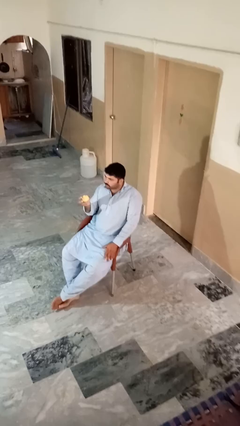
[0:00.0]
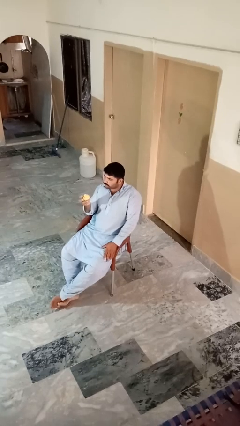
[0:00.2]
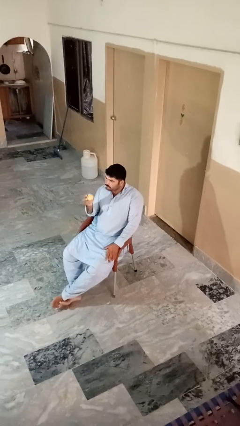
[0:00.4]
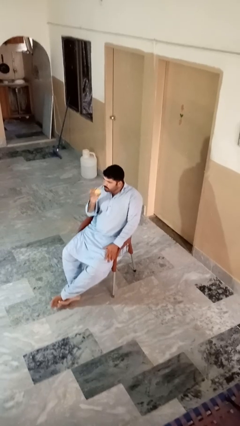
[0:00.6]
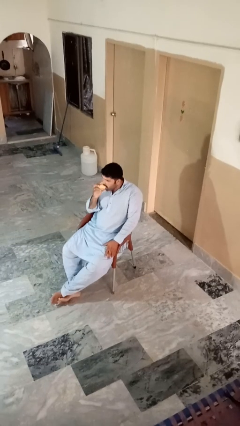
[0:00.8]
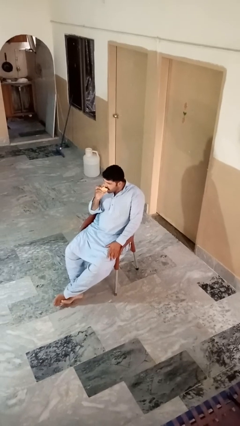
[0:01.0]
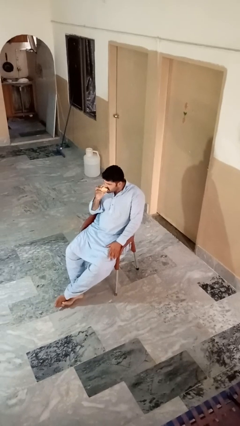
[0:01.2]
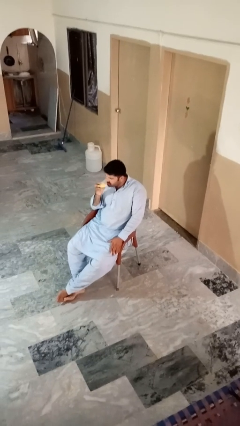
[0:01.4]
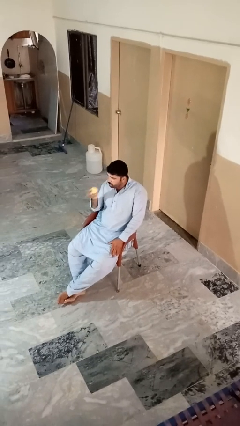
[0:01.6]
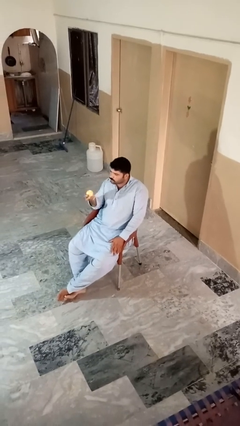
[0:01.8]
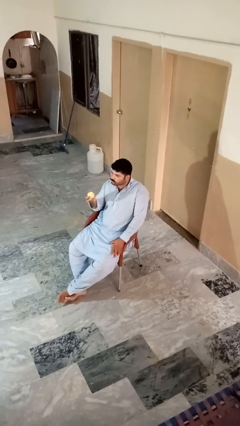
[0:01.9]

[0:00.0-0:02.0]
person eats apple

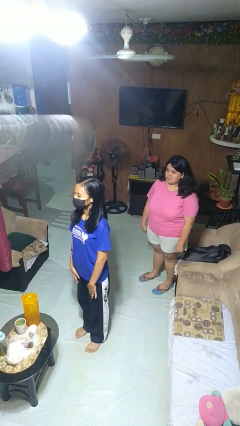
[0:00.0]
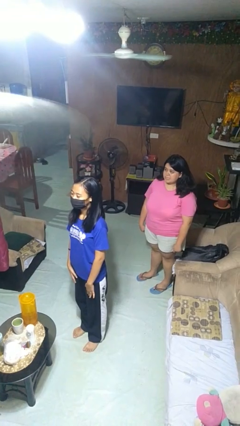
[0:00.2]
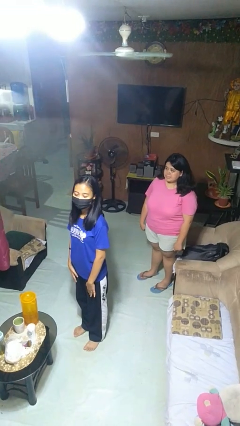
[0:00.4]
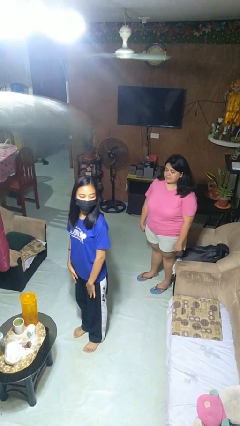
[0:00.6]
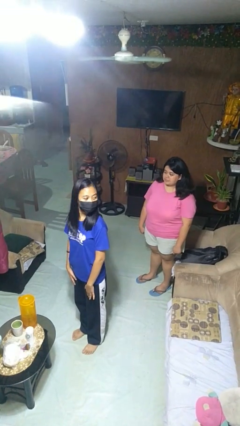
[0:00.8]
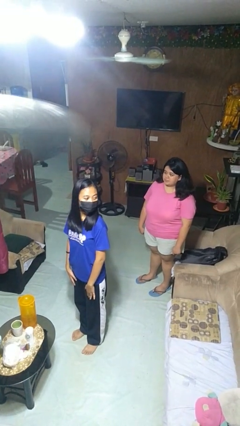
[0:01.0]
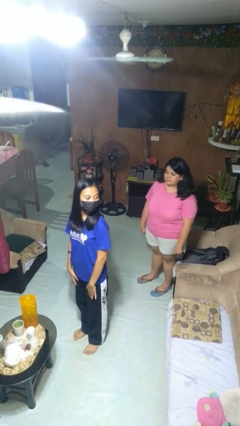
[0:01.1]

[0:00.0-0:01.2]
person looks over shoulder

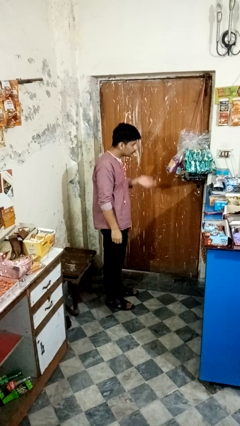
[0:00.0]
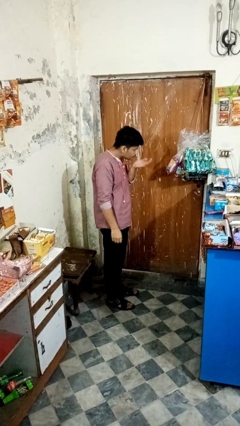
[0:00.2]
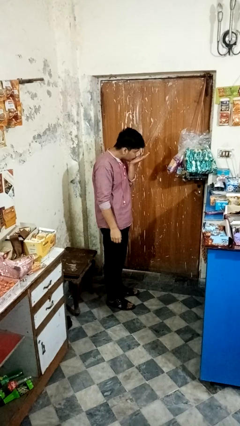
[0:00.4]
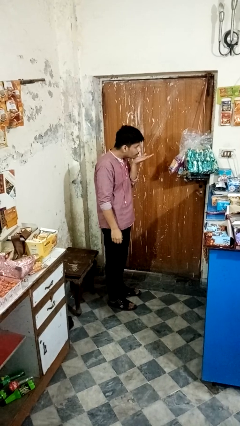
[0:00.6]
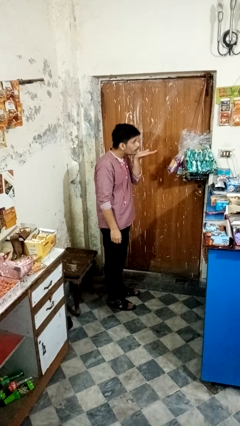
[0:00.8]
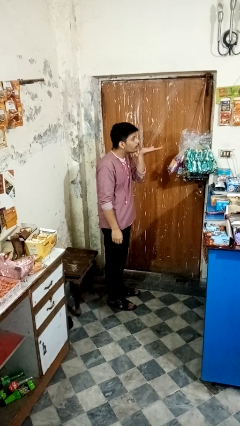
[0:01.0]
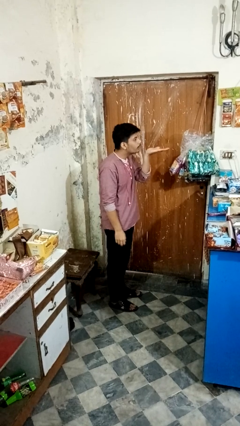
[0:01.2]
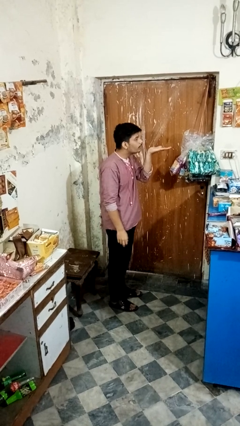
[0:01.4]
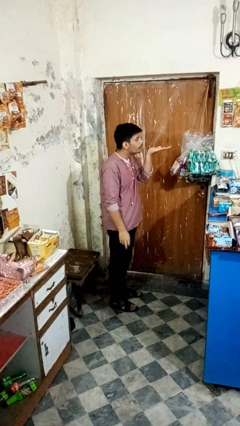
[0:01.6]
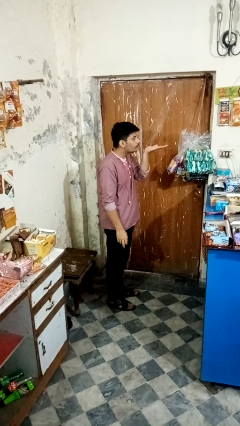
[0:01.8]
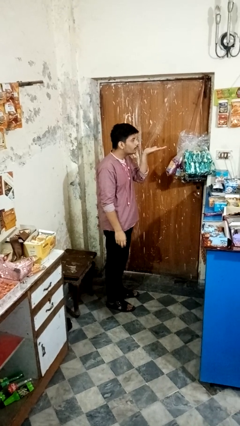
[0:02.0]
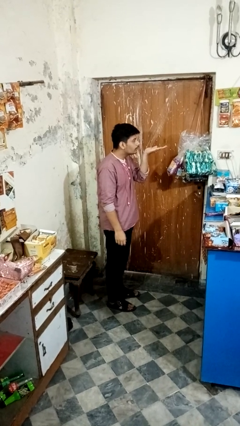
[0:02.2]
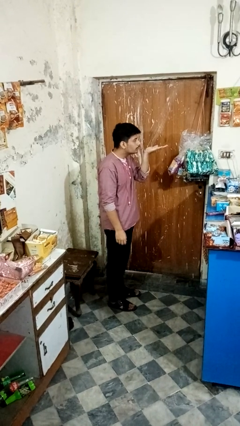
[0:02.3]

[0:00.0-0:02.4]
person gestures blow kiss

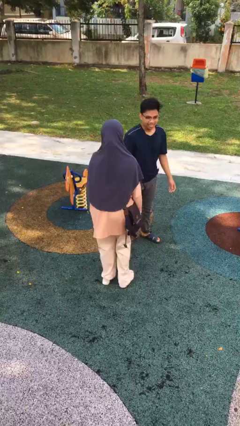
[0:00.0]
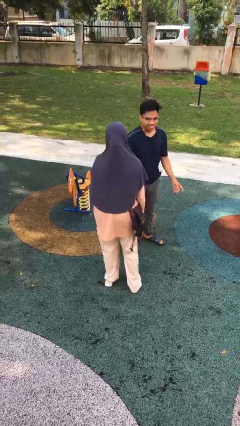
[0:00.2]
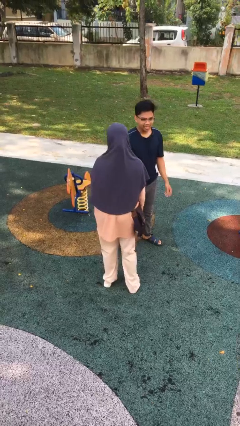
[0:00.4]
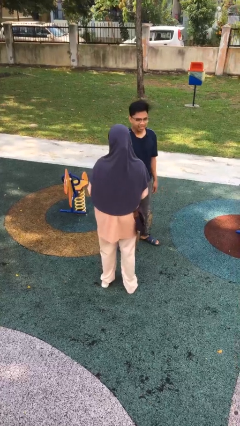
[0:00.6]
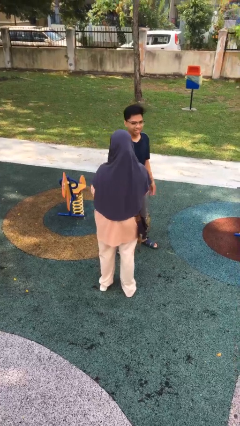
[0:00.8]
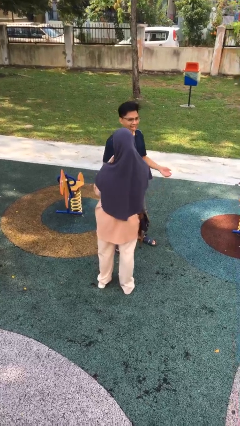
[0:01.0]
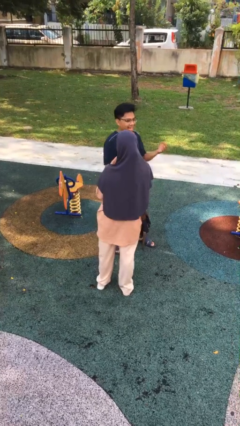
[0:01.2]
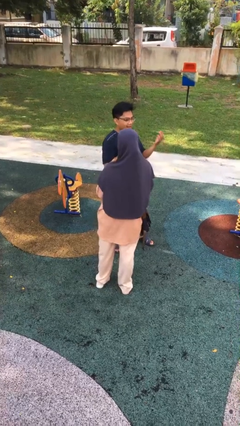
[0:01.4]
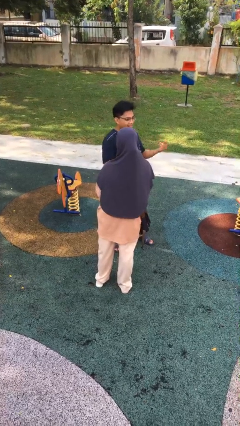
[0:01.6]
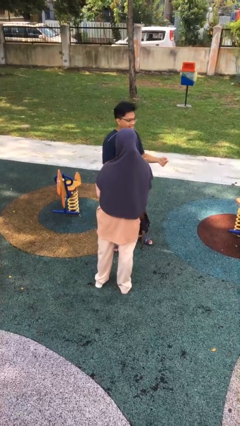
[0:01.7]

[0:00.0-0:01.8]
person laughs with person

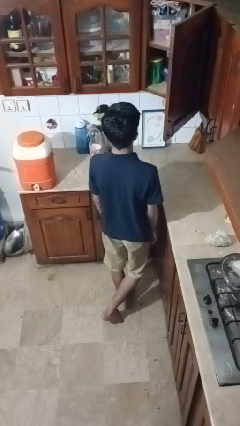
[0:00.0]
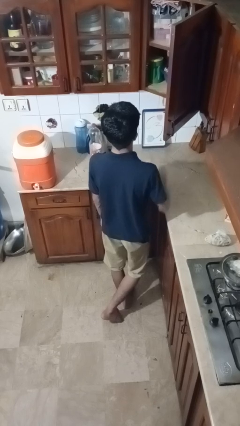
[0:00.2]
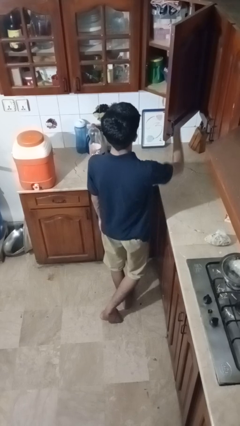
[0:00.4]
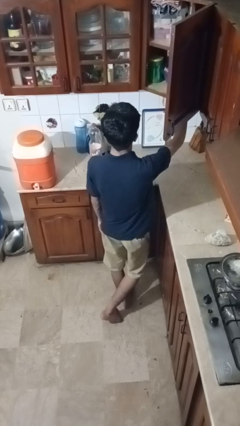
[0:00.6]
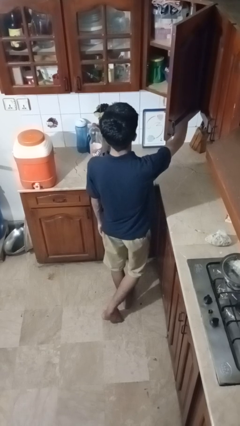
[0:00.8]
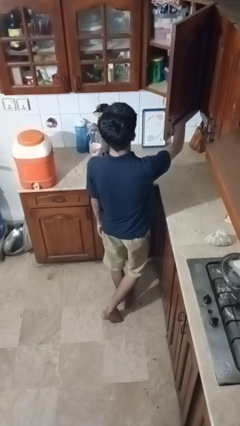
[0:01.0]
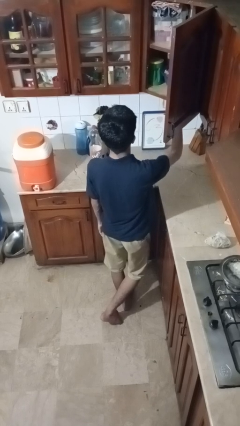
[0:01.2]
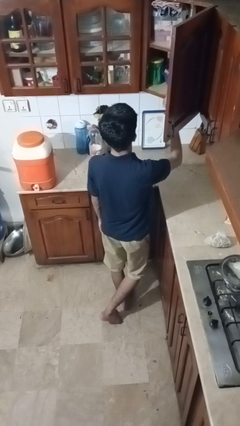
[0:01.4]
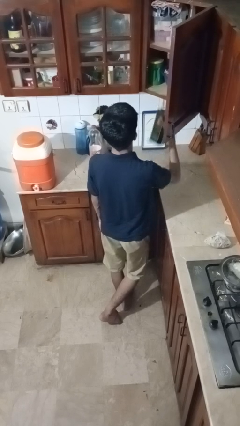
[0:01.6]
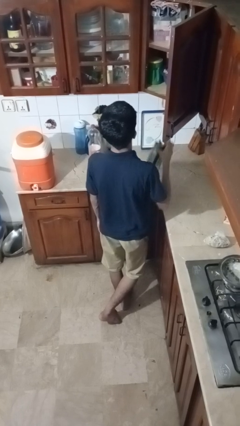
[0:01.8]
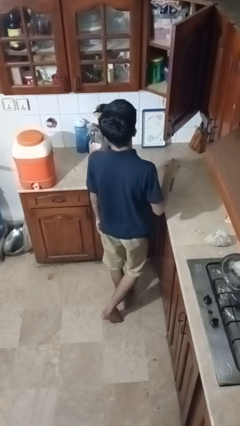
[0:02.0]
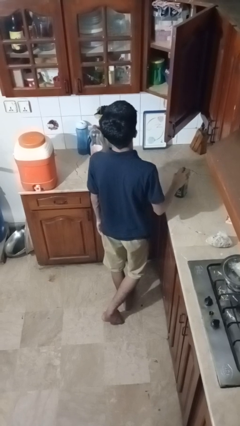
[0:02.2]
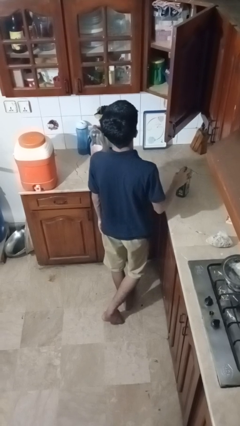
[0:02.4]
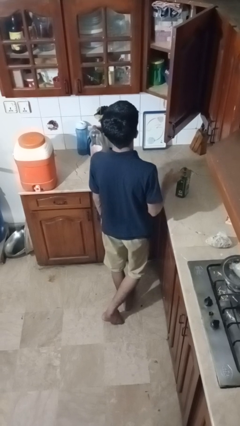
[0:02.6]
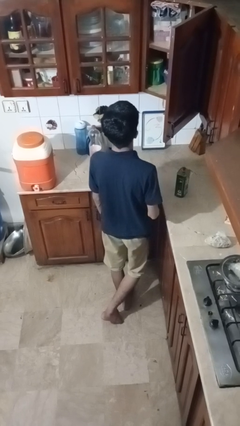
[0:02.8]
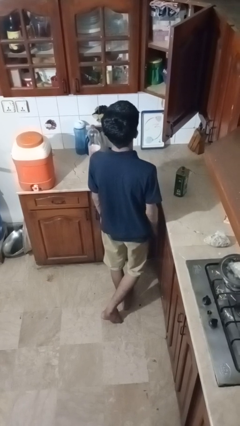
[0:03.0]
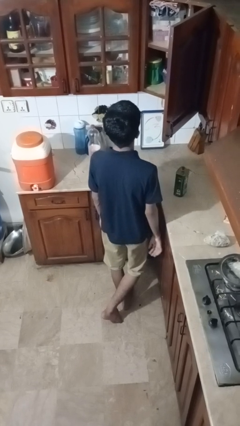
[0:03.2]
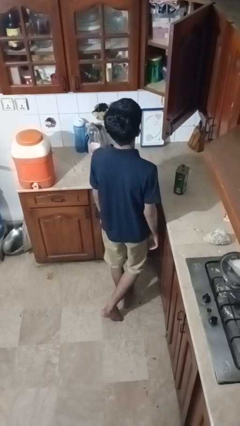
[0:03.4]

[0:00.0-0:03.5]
person takes object from cabinet

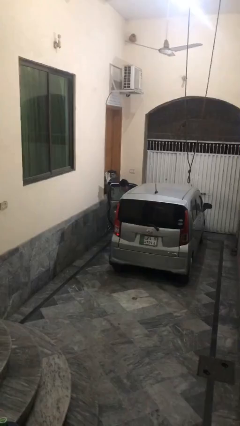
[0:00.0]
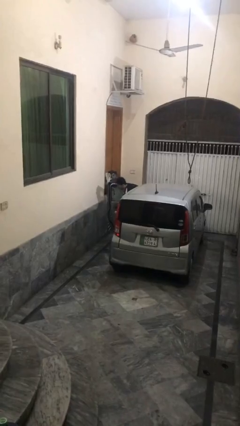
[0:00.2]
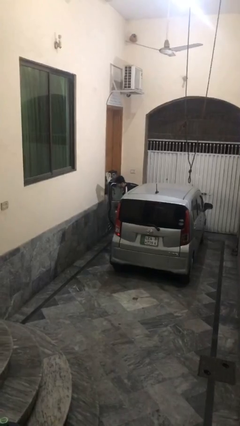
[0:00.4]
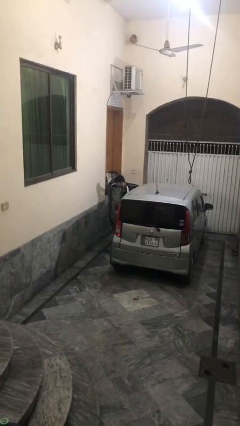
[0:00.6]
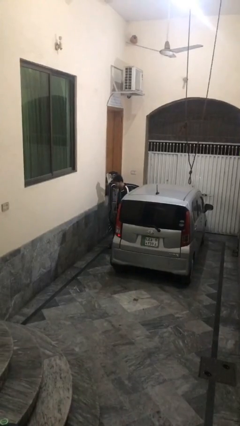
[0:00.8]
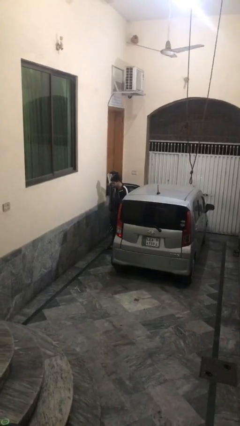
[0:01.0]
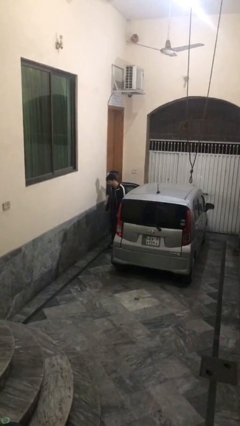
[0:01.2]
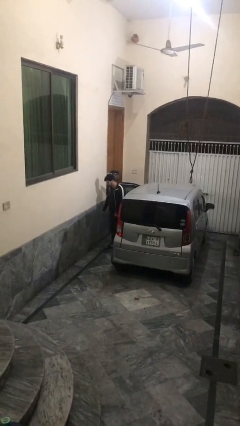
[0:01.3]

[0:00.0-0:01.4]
person exits car

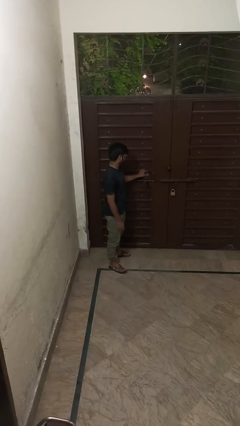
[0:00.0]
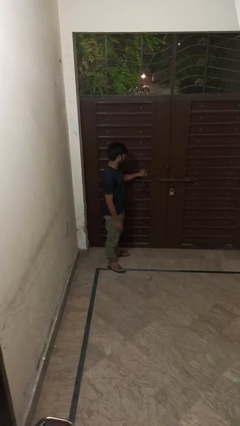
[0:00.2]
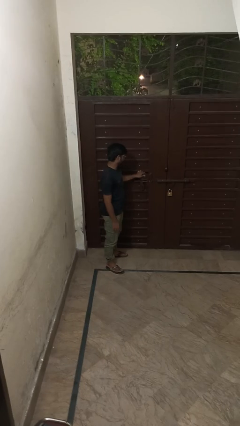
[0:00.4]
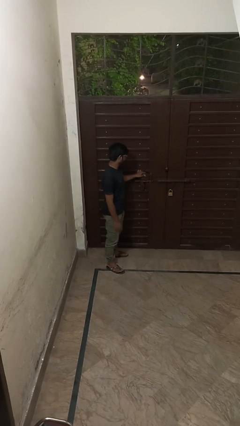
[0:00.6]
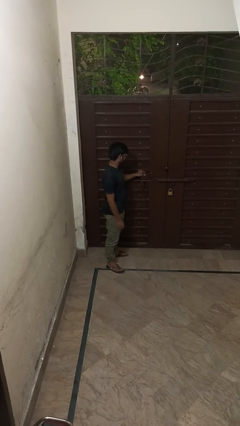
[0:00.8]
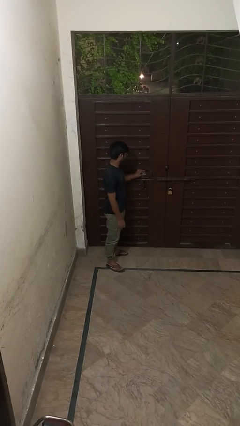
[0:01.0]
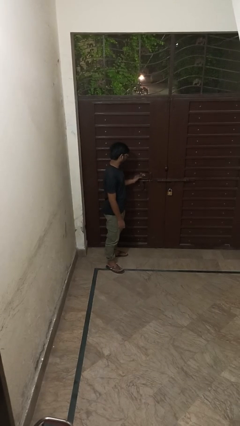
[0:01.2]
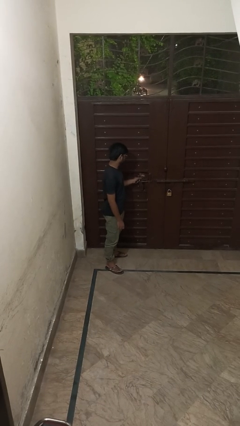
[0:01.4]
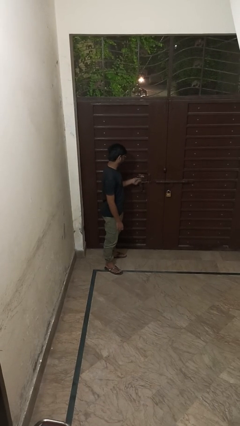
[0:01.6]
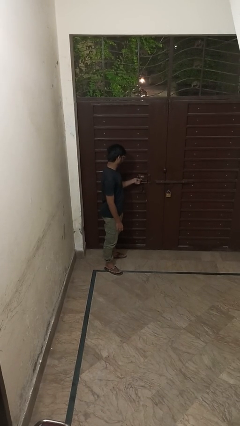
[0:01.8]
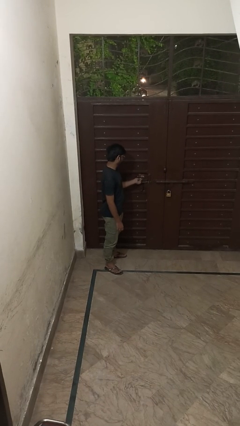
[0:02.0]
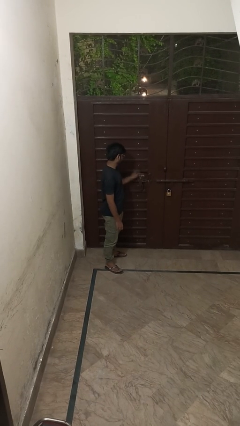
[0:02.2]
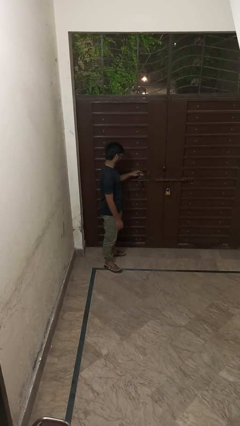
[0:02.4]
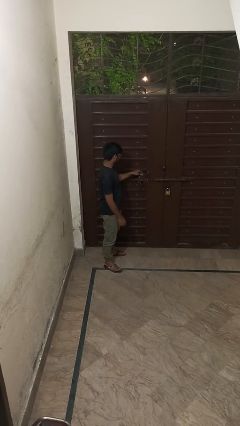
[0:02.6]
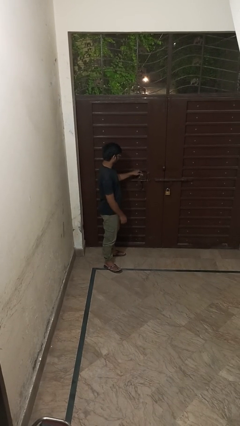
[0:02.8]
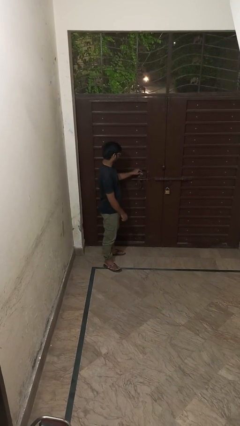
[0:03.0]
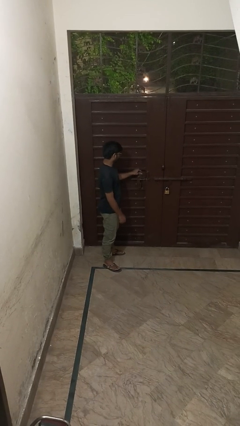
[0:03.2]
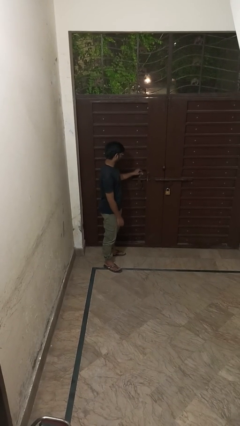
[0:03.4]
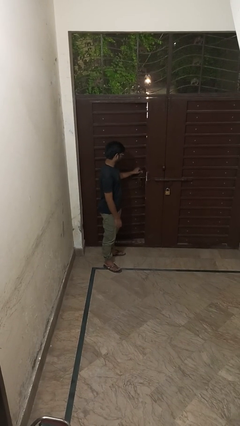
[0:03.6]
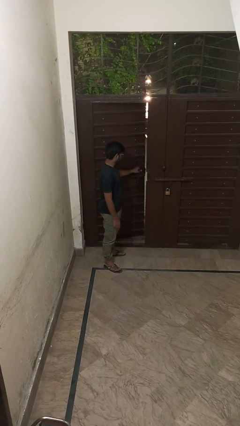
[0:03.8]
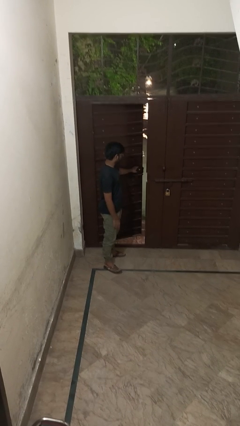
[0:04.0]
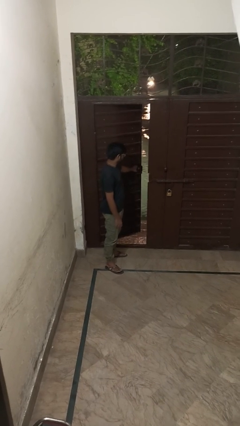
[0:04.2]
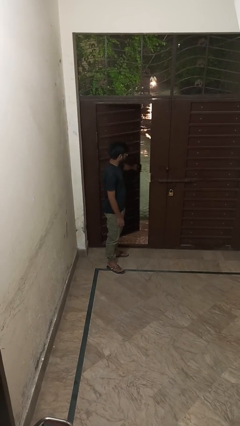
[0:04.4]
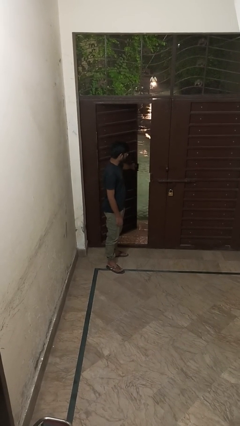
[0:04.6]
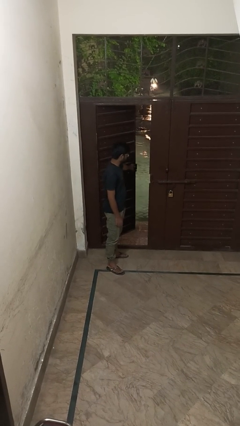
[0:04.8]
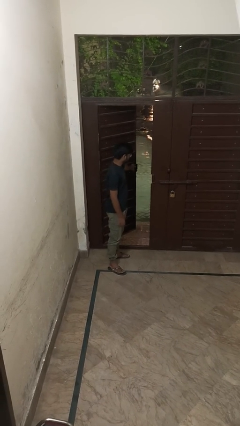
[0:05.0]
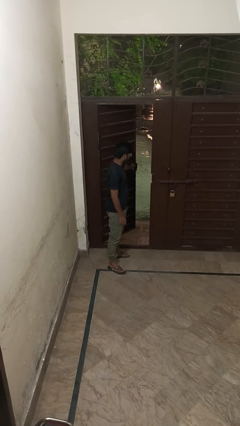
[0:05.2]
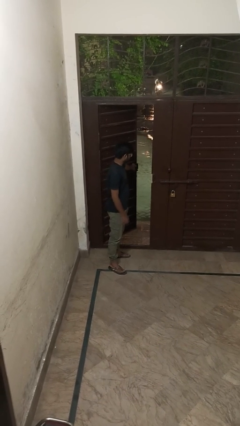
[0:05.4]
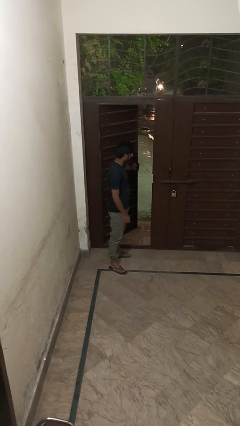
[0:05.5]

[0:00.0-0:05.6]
person opens facility door
